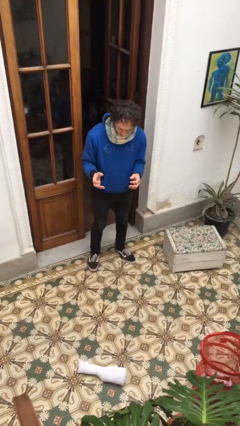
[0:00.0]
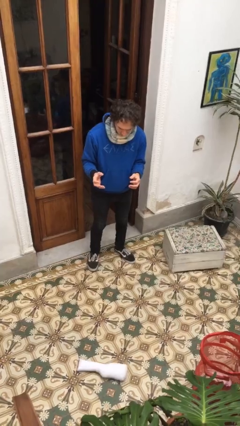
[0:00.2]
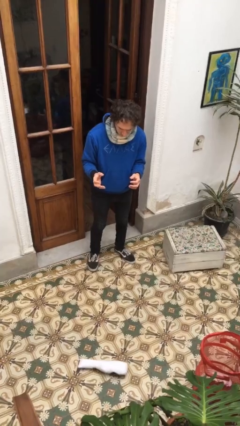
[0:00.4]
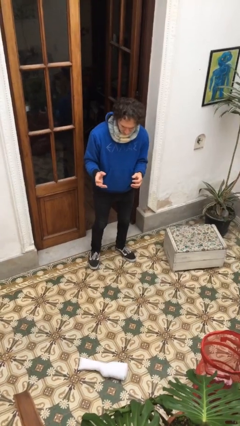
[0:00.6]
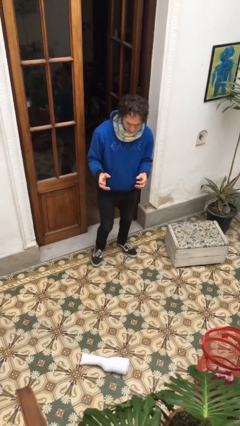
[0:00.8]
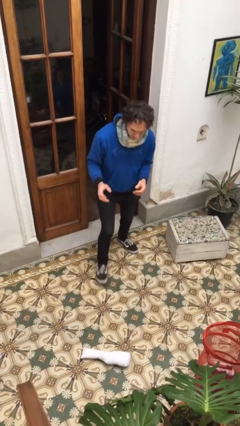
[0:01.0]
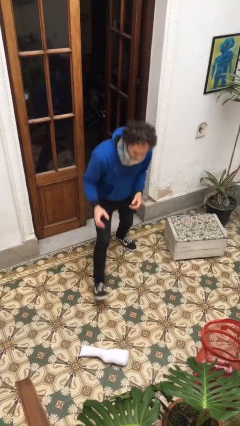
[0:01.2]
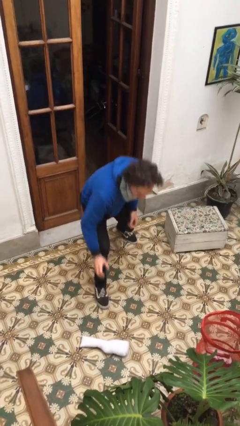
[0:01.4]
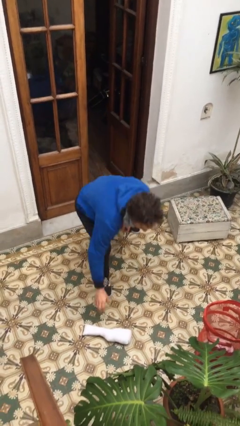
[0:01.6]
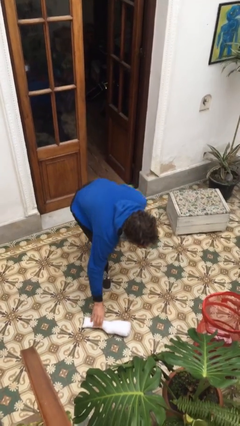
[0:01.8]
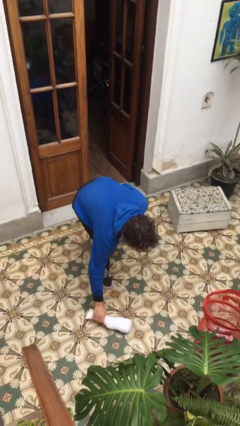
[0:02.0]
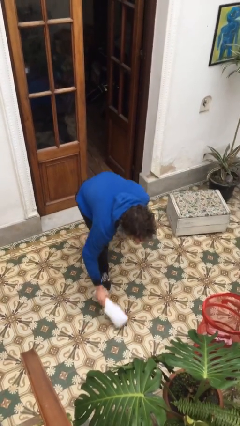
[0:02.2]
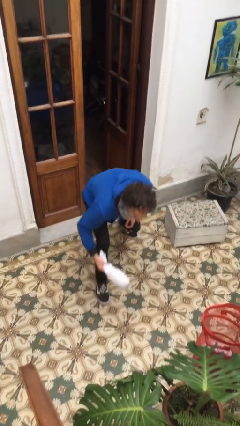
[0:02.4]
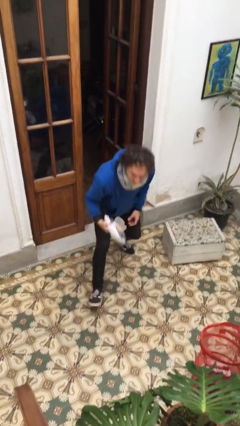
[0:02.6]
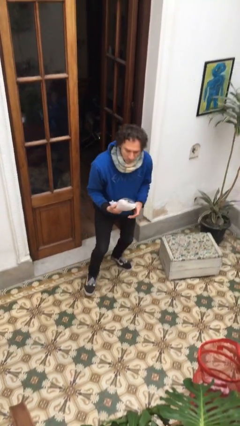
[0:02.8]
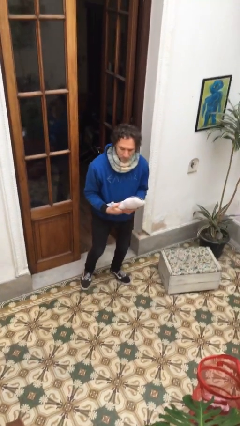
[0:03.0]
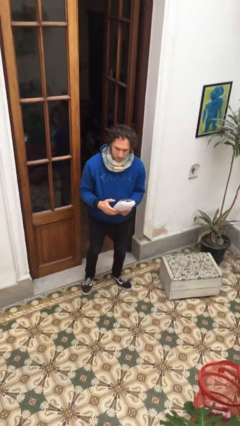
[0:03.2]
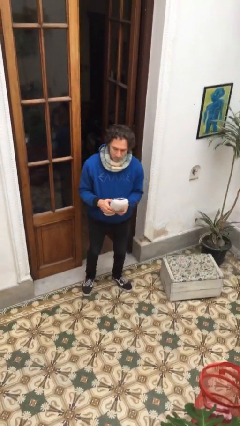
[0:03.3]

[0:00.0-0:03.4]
person picks up object from floor

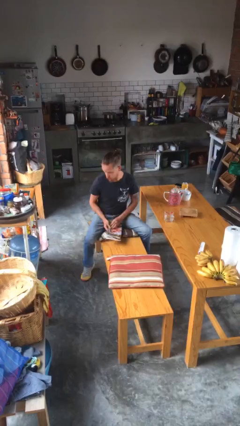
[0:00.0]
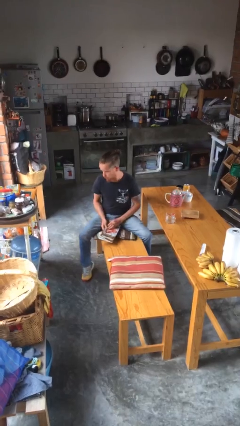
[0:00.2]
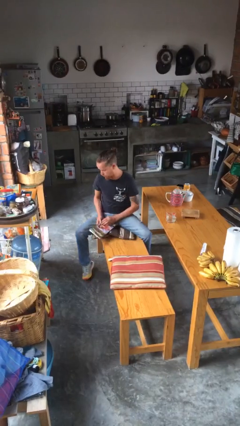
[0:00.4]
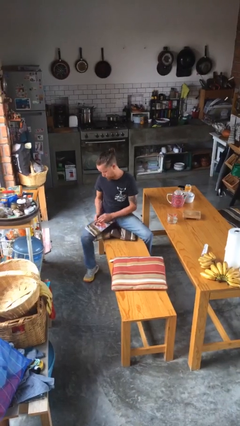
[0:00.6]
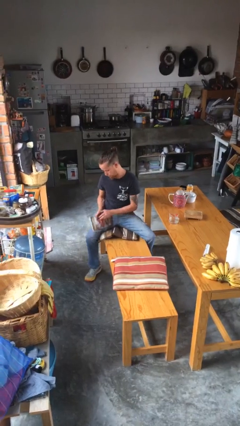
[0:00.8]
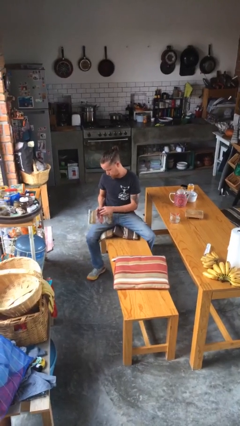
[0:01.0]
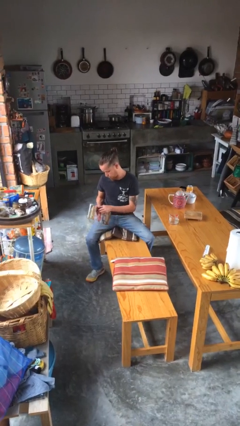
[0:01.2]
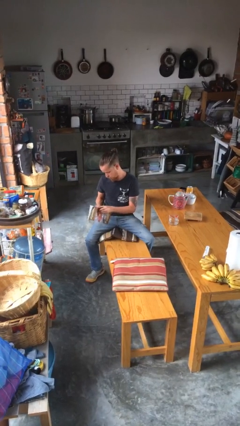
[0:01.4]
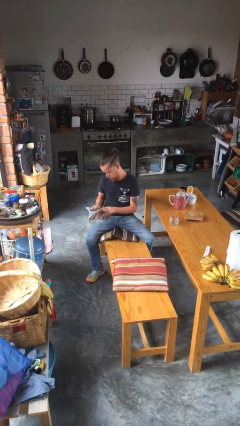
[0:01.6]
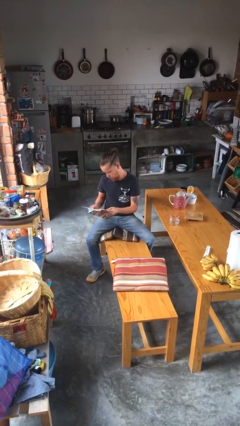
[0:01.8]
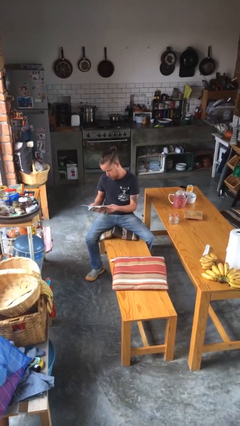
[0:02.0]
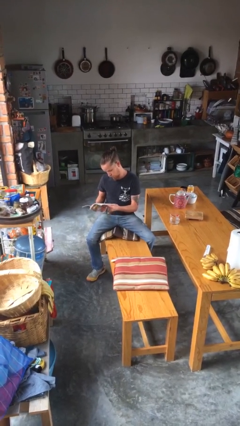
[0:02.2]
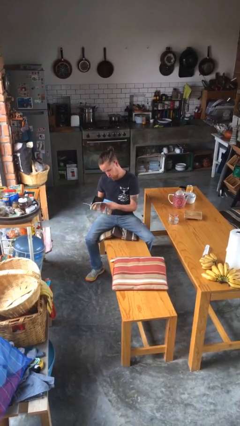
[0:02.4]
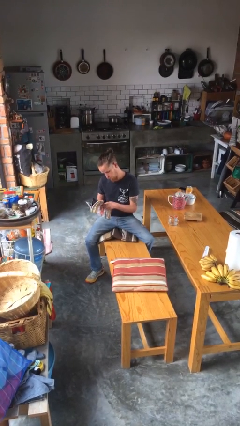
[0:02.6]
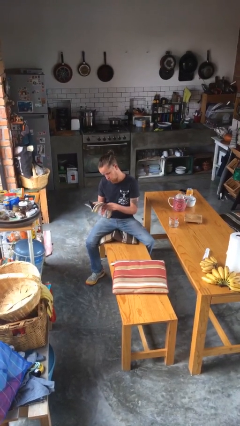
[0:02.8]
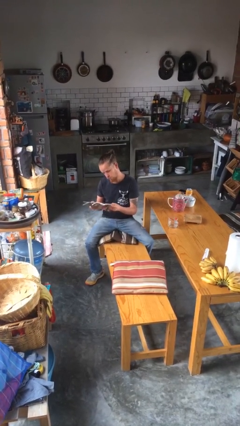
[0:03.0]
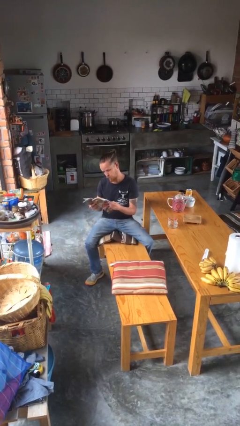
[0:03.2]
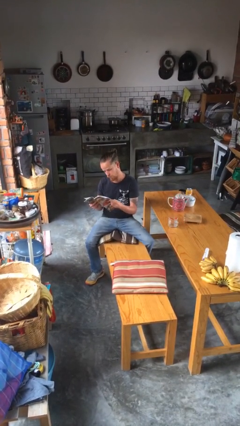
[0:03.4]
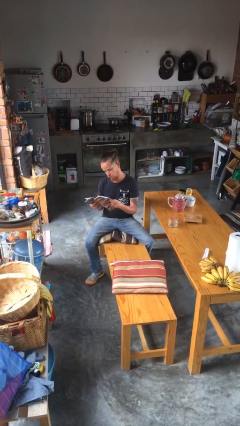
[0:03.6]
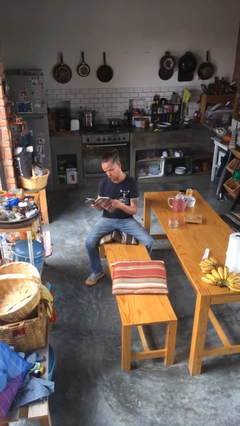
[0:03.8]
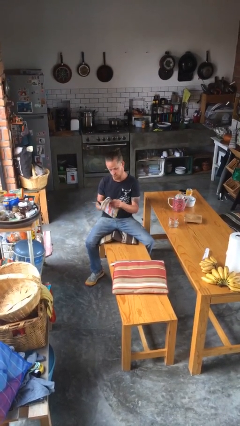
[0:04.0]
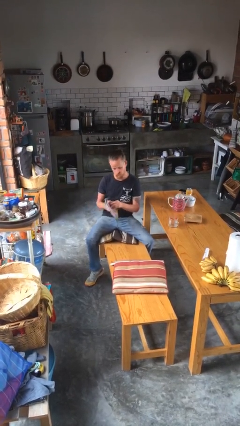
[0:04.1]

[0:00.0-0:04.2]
person reads magazine

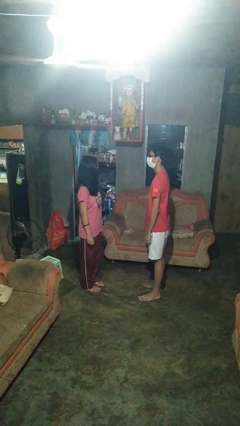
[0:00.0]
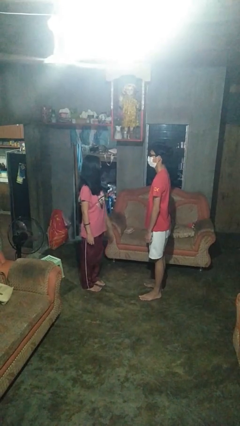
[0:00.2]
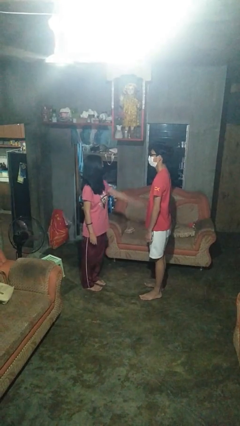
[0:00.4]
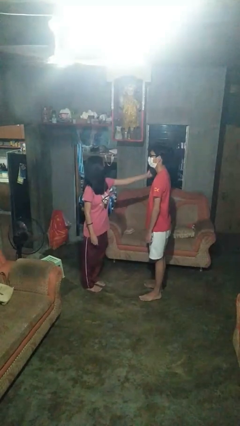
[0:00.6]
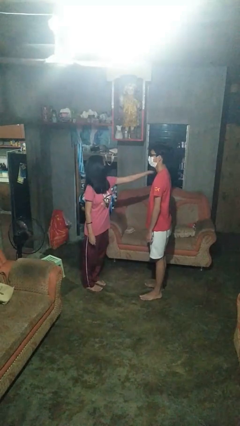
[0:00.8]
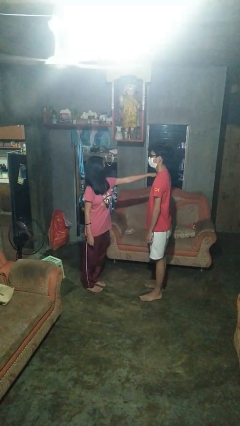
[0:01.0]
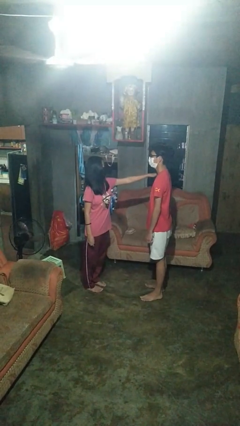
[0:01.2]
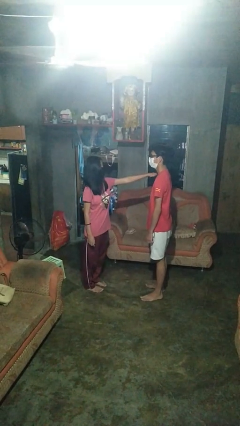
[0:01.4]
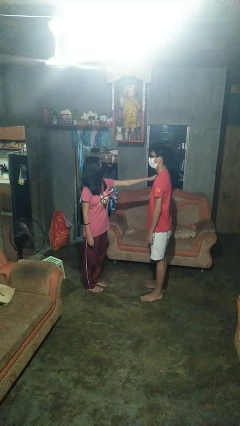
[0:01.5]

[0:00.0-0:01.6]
person pounds shoulders of person

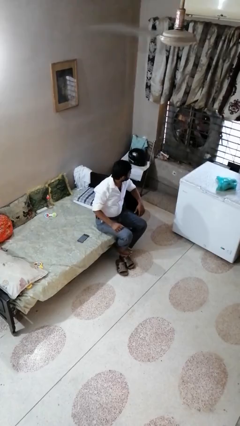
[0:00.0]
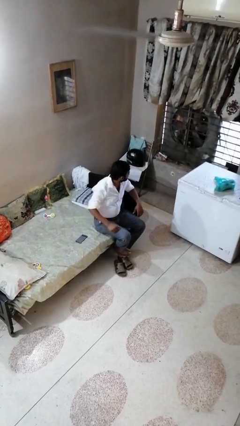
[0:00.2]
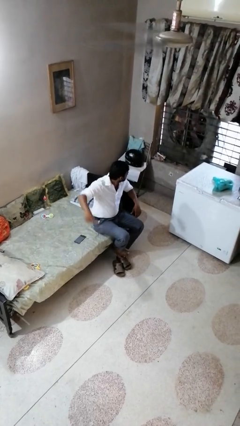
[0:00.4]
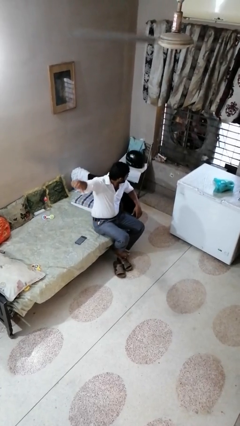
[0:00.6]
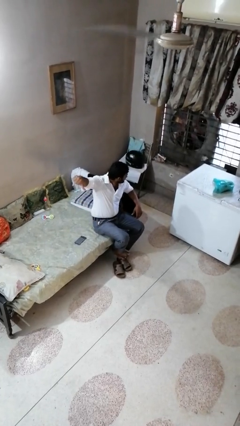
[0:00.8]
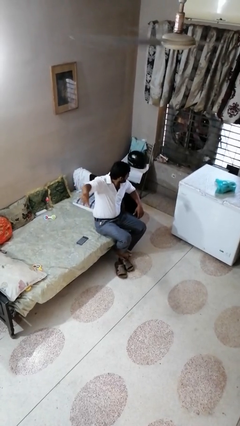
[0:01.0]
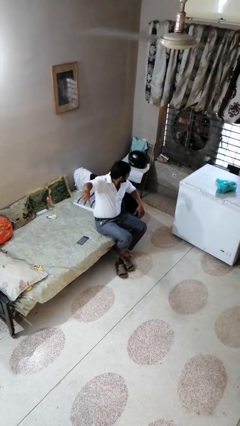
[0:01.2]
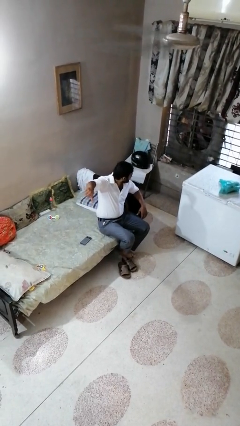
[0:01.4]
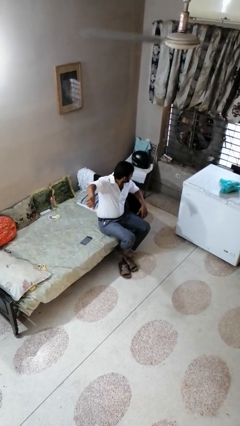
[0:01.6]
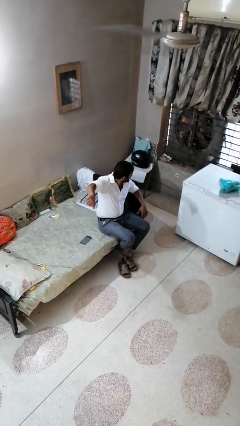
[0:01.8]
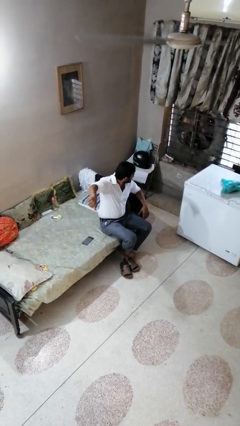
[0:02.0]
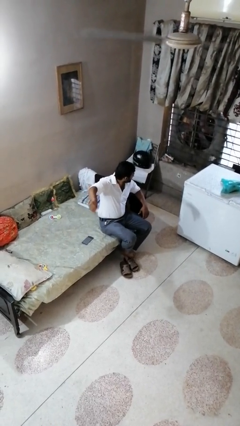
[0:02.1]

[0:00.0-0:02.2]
person gestures thumbs down

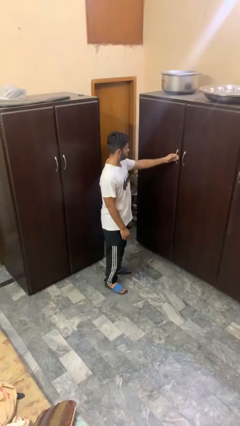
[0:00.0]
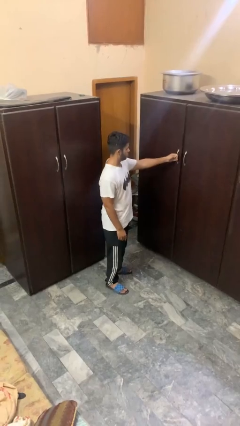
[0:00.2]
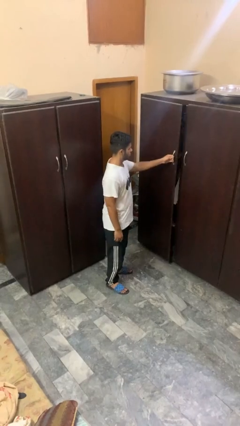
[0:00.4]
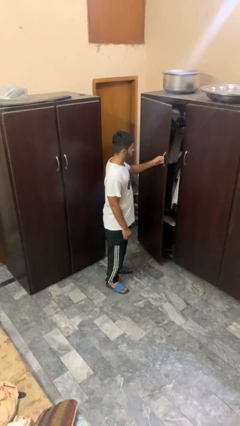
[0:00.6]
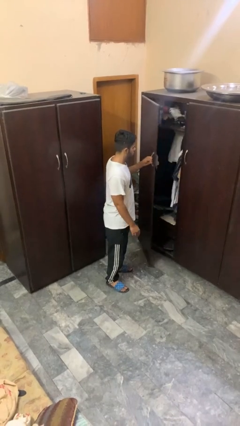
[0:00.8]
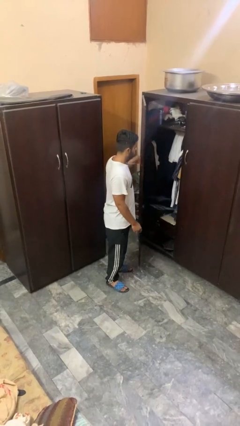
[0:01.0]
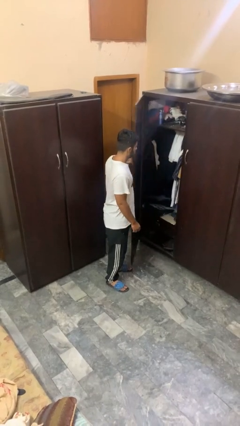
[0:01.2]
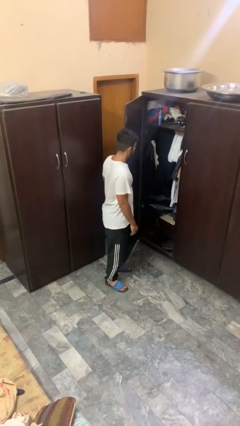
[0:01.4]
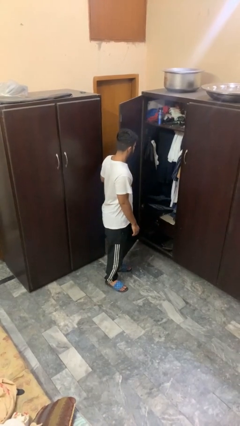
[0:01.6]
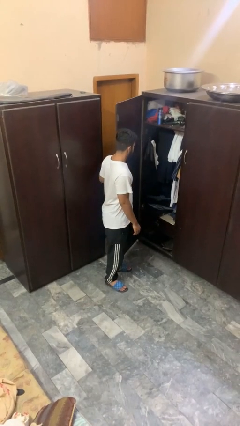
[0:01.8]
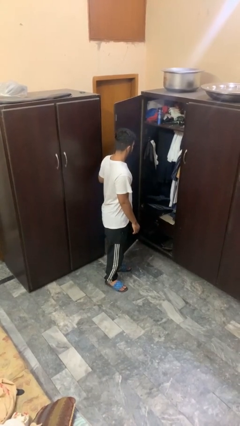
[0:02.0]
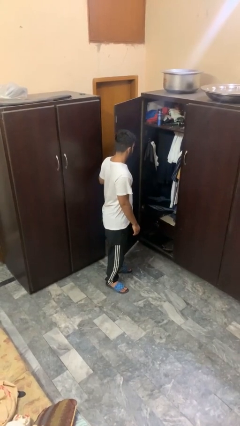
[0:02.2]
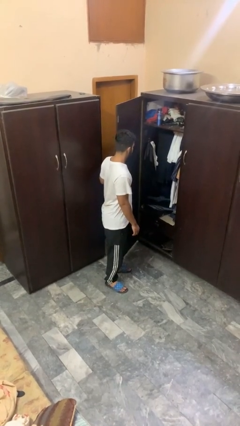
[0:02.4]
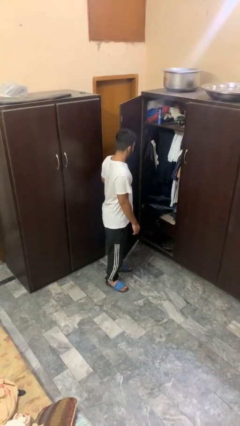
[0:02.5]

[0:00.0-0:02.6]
person opens closet door

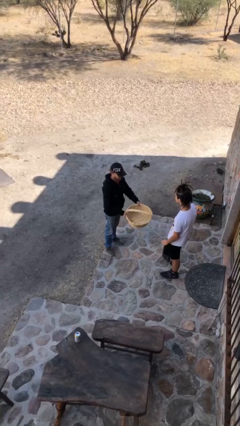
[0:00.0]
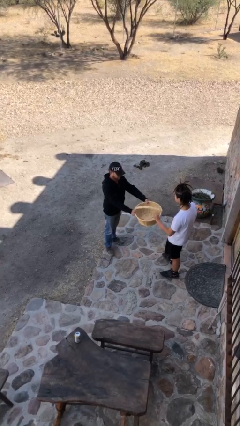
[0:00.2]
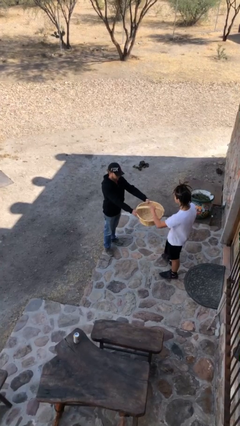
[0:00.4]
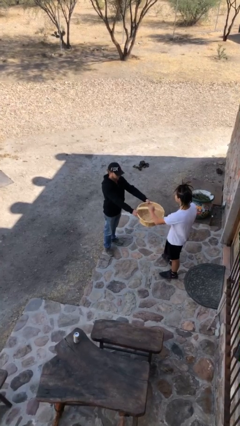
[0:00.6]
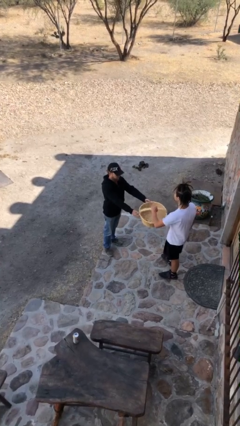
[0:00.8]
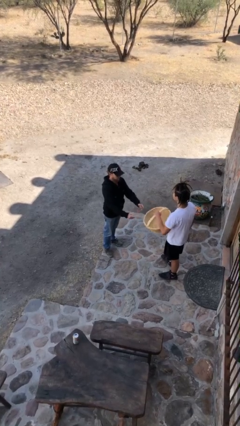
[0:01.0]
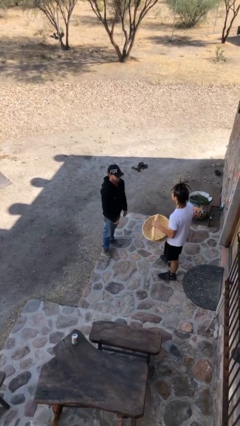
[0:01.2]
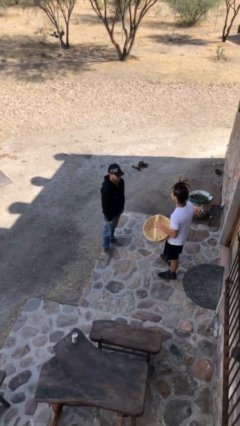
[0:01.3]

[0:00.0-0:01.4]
person transfers object to person

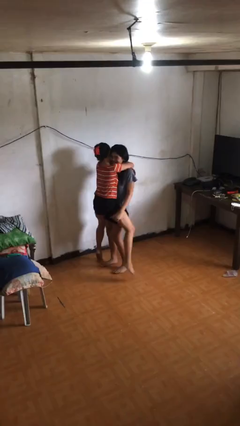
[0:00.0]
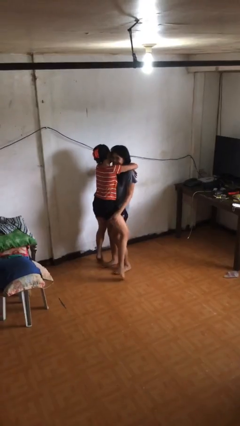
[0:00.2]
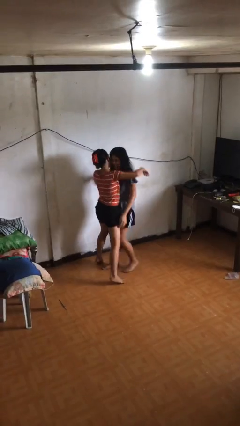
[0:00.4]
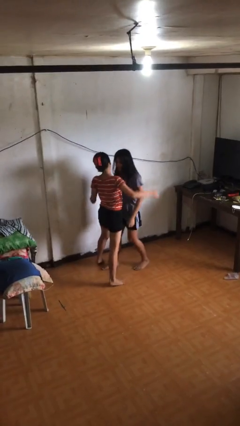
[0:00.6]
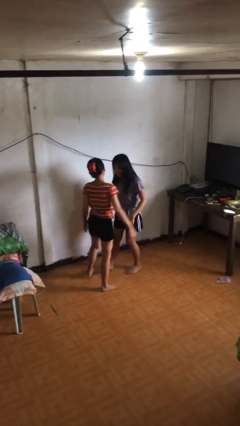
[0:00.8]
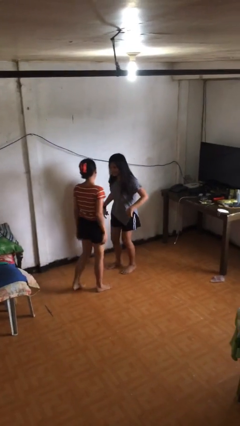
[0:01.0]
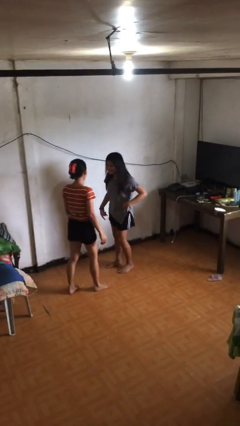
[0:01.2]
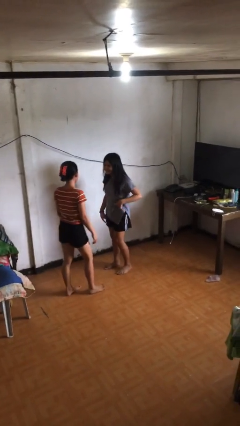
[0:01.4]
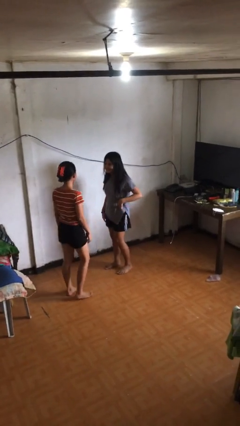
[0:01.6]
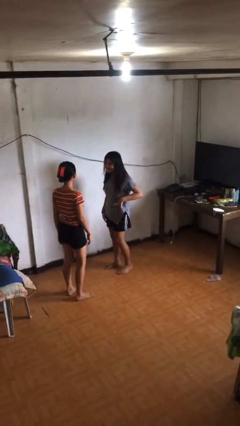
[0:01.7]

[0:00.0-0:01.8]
person puts down person
